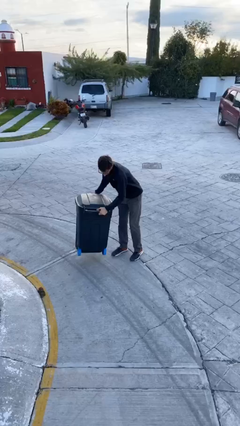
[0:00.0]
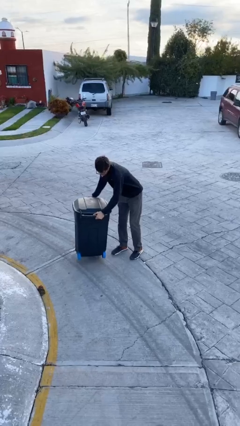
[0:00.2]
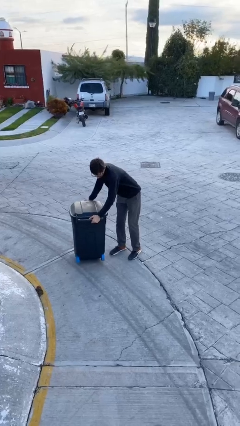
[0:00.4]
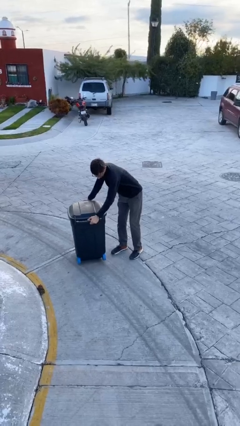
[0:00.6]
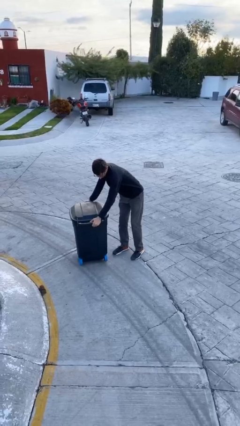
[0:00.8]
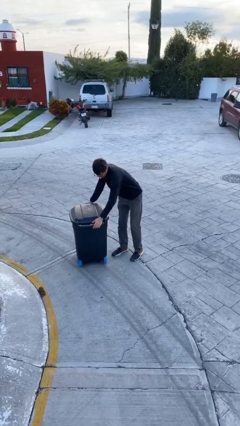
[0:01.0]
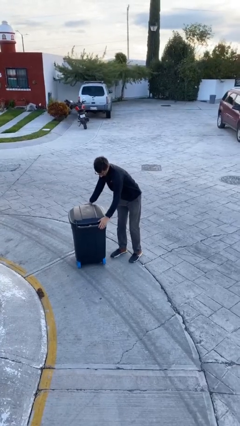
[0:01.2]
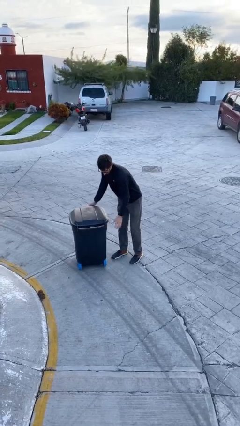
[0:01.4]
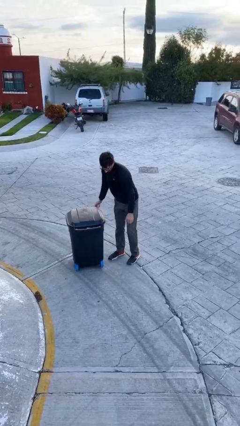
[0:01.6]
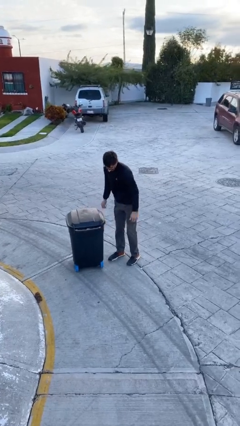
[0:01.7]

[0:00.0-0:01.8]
person puts down object on floor

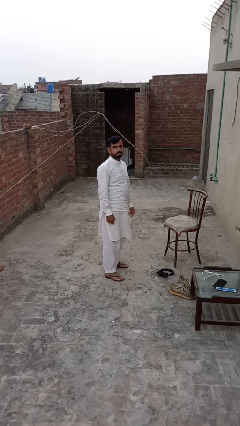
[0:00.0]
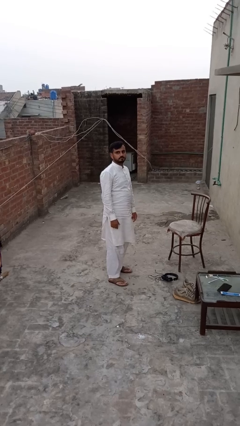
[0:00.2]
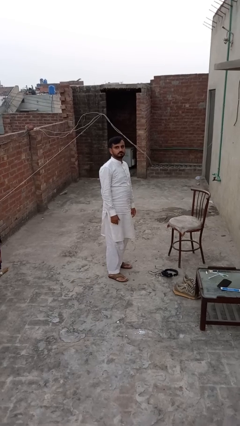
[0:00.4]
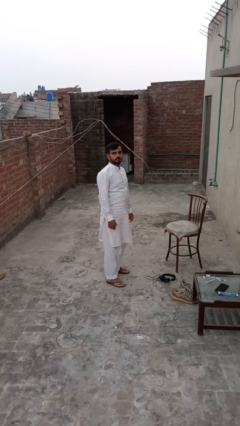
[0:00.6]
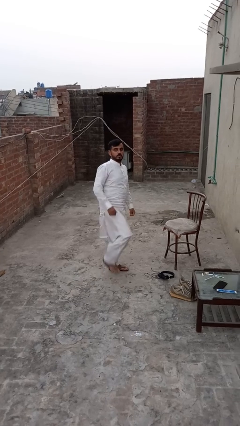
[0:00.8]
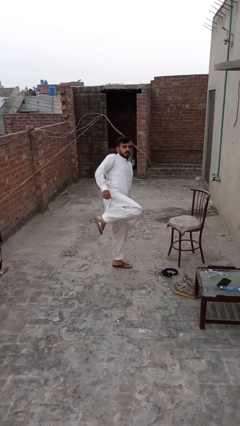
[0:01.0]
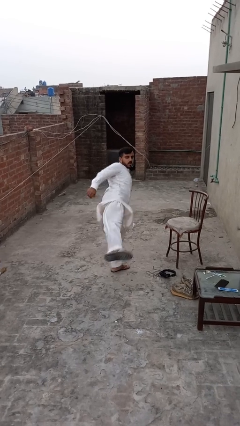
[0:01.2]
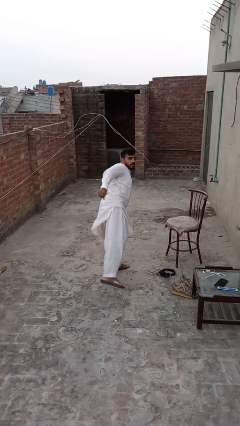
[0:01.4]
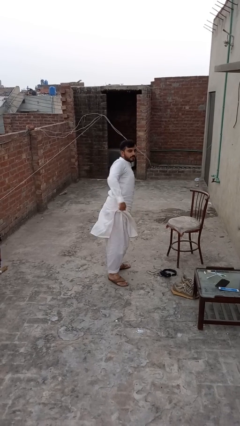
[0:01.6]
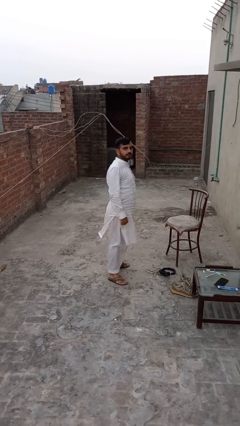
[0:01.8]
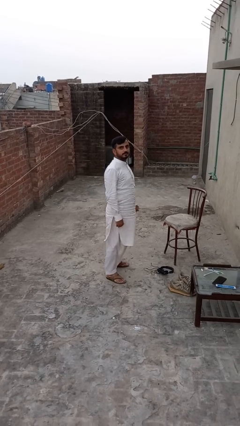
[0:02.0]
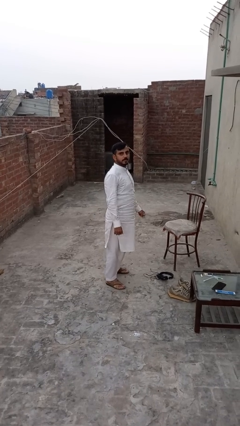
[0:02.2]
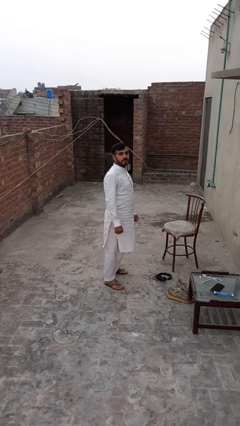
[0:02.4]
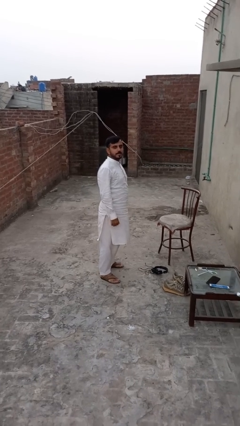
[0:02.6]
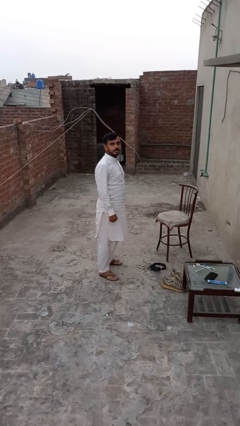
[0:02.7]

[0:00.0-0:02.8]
person karate kicks

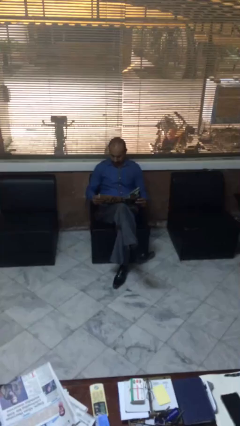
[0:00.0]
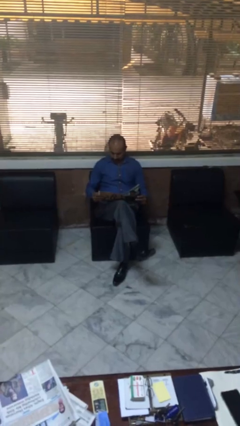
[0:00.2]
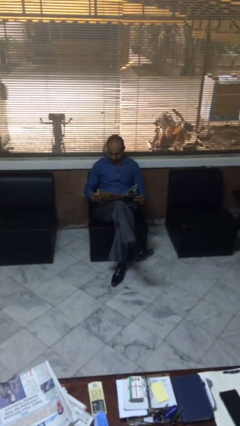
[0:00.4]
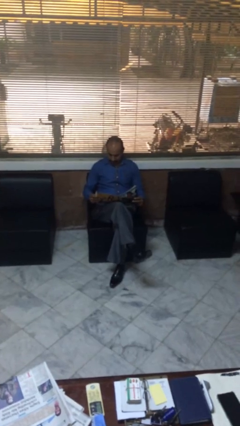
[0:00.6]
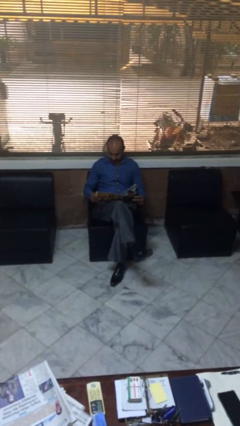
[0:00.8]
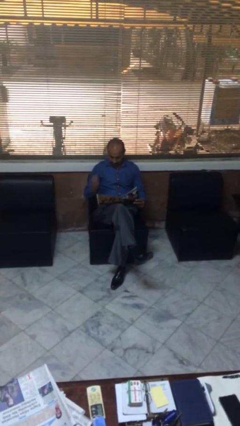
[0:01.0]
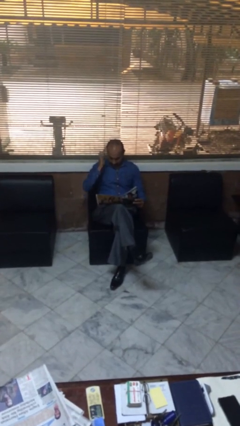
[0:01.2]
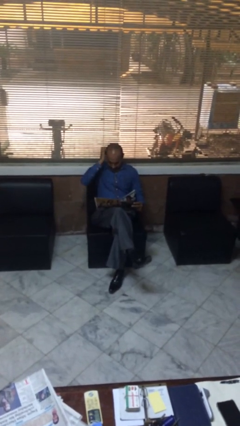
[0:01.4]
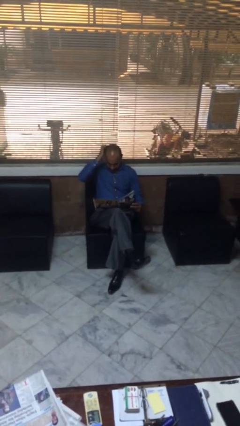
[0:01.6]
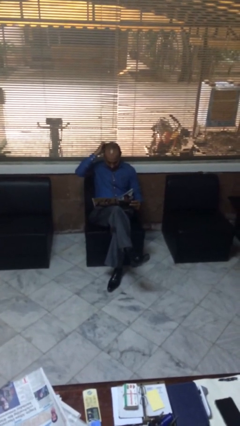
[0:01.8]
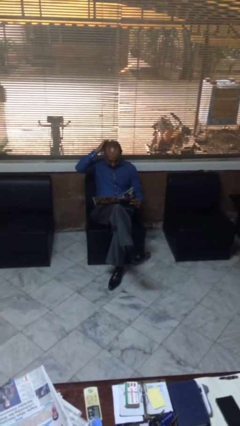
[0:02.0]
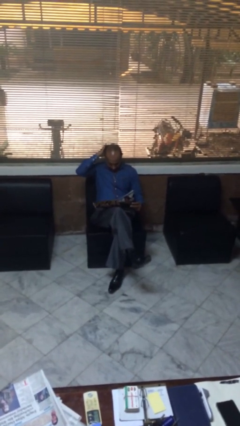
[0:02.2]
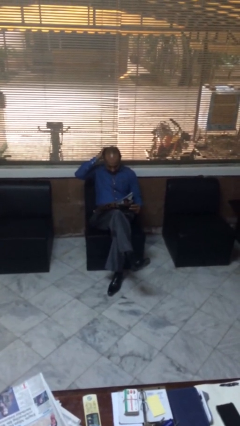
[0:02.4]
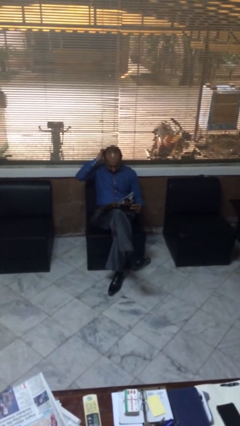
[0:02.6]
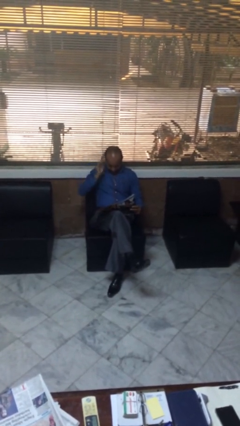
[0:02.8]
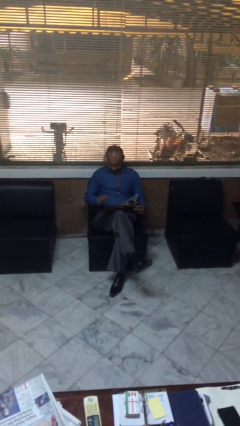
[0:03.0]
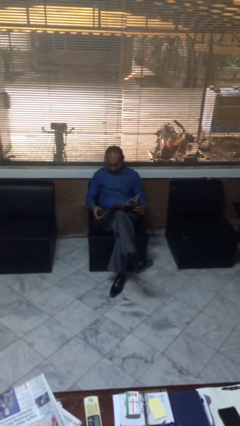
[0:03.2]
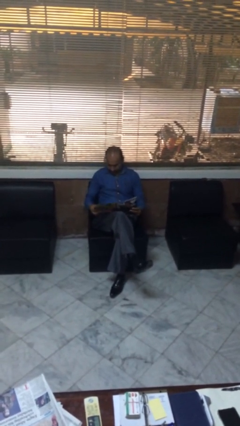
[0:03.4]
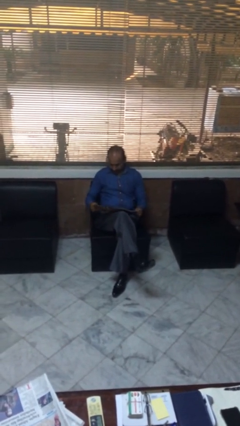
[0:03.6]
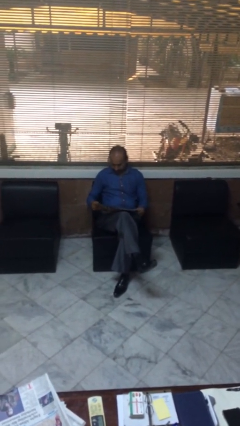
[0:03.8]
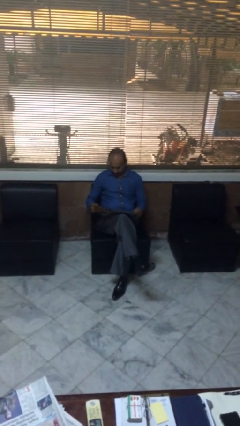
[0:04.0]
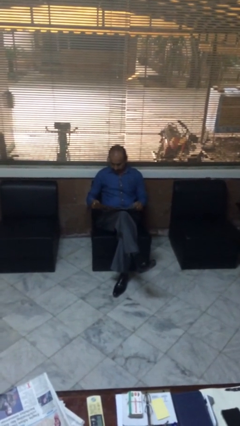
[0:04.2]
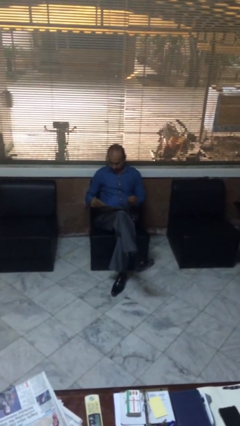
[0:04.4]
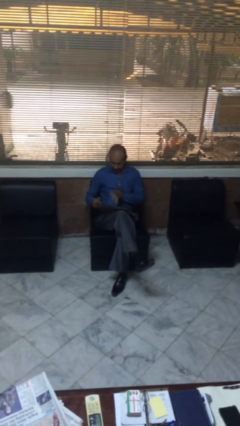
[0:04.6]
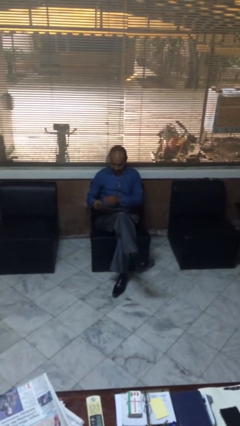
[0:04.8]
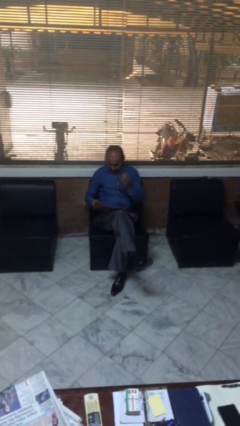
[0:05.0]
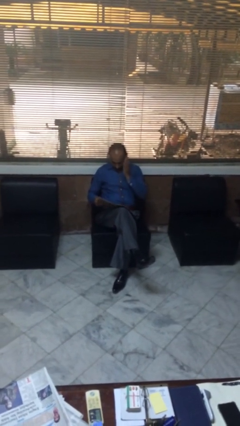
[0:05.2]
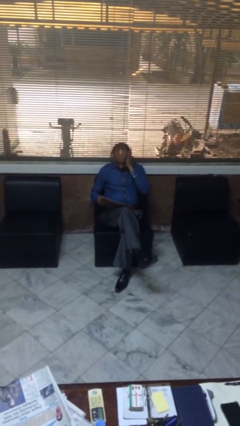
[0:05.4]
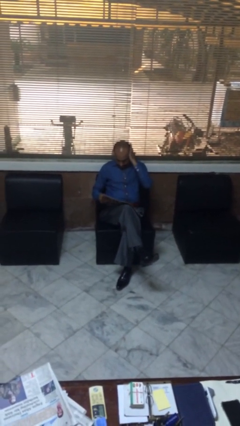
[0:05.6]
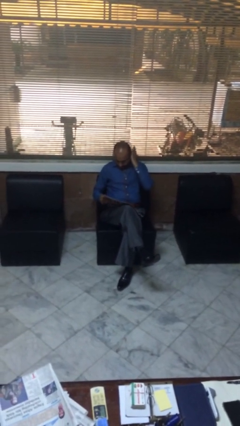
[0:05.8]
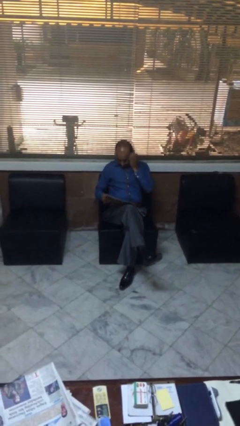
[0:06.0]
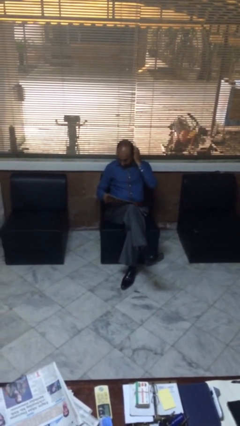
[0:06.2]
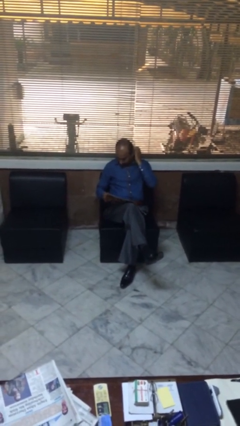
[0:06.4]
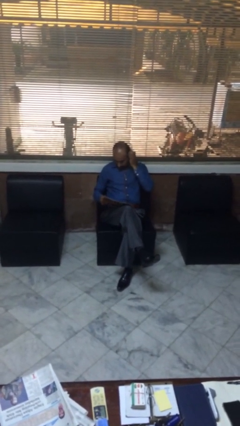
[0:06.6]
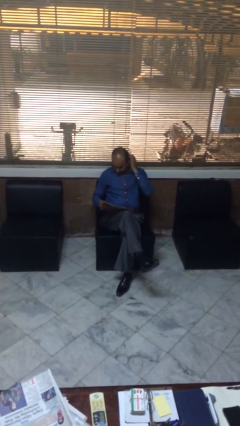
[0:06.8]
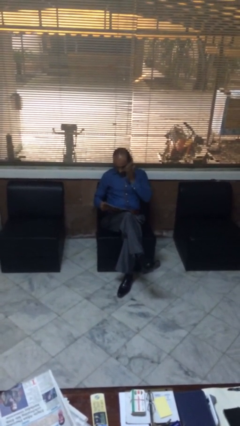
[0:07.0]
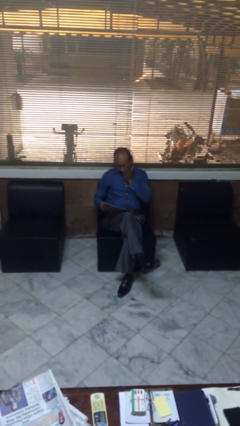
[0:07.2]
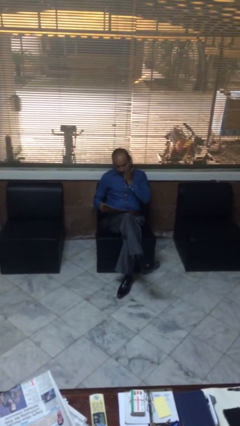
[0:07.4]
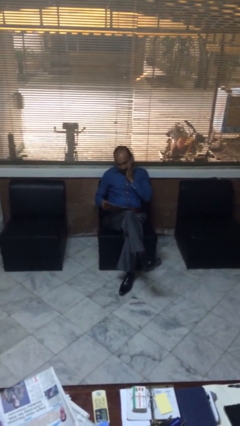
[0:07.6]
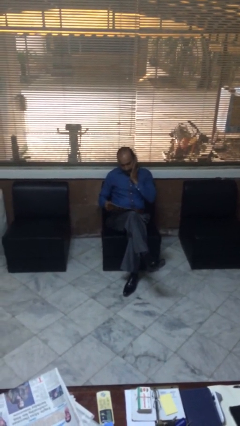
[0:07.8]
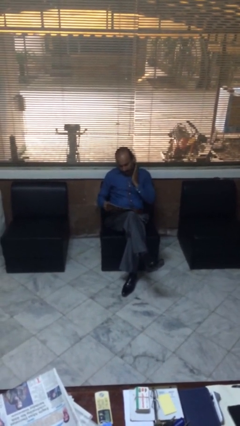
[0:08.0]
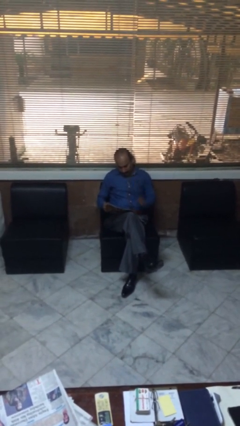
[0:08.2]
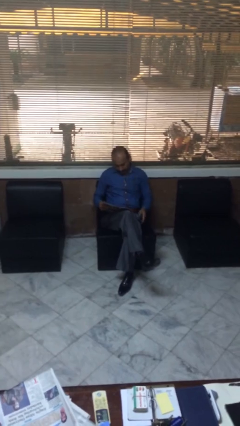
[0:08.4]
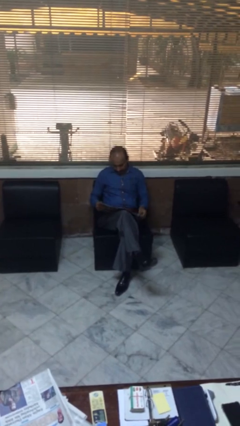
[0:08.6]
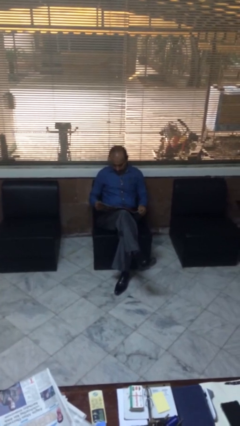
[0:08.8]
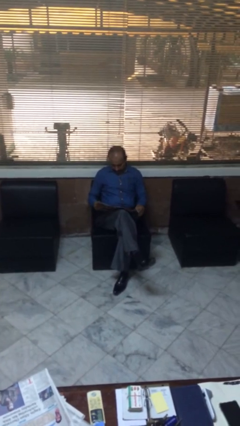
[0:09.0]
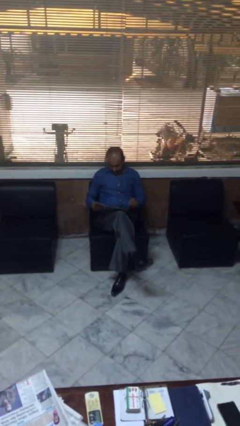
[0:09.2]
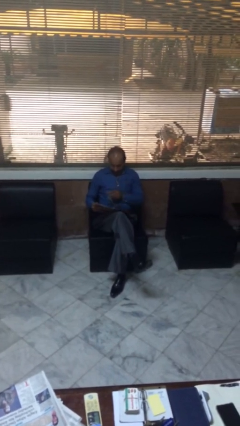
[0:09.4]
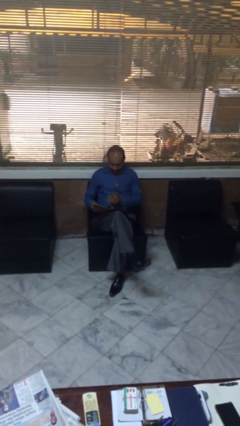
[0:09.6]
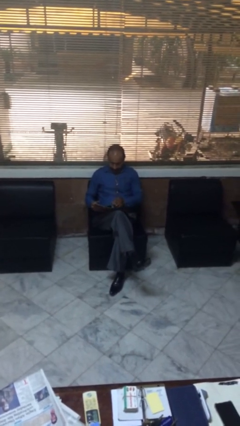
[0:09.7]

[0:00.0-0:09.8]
person reads document

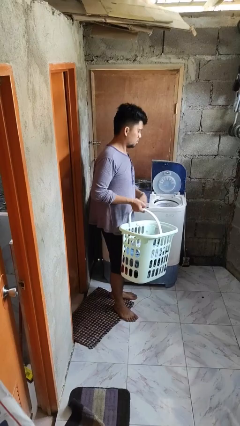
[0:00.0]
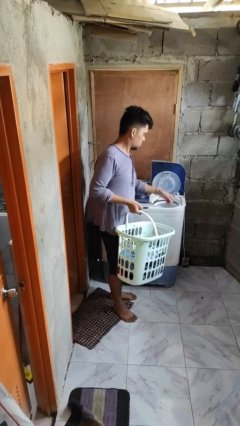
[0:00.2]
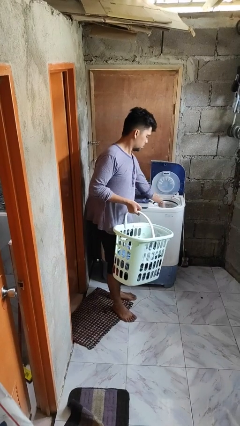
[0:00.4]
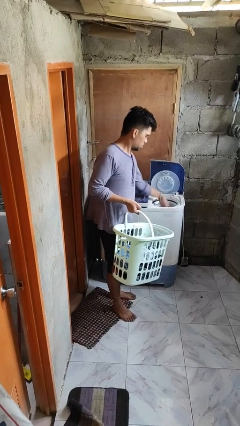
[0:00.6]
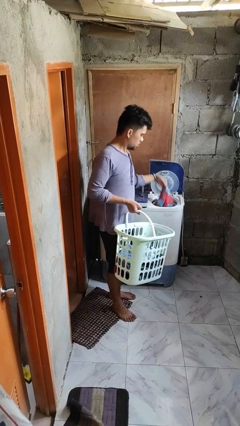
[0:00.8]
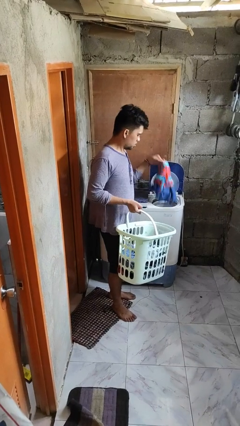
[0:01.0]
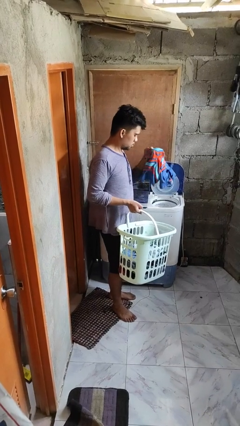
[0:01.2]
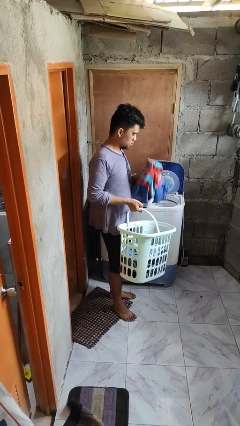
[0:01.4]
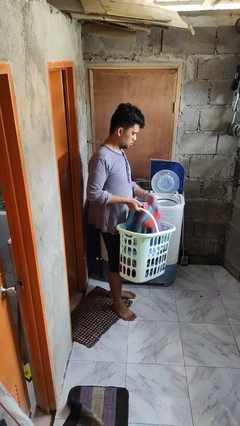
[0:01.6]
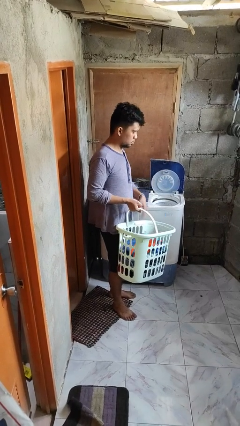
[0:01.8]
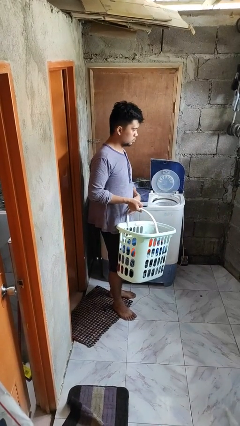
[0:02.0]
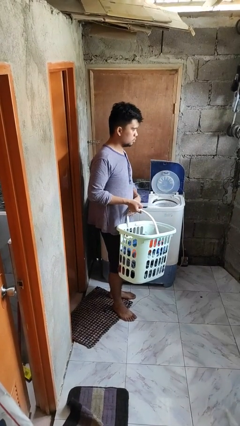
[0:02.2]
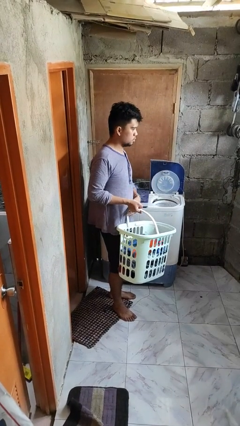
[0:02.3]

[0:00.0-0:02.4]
person unloads dryer

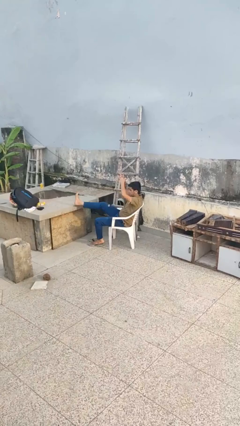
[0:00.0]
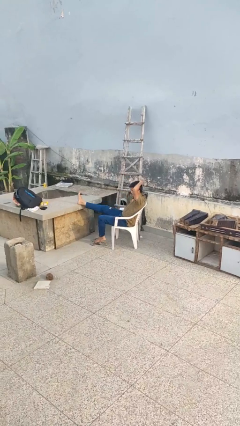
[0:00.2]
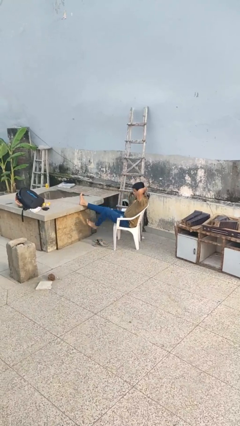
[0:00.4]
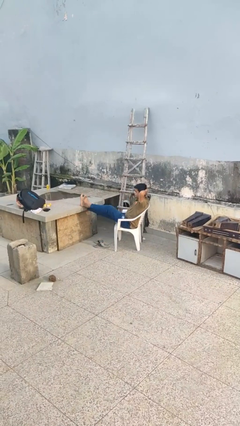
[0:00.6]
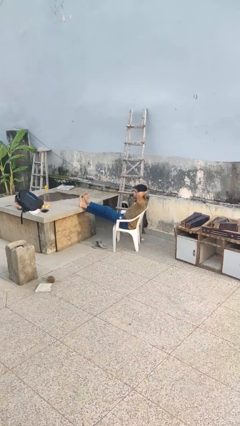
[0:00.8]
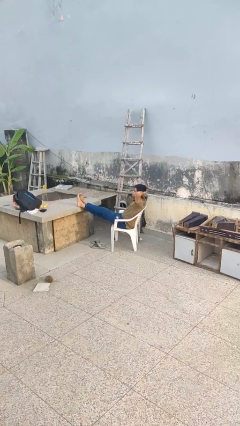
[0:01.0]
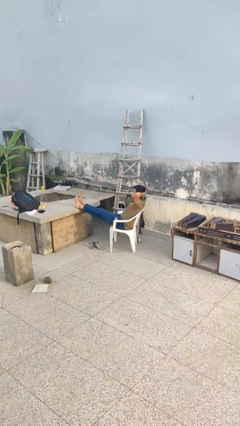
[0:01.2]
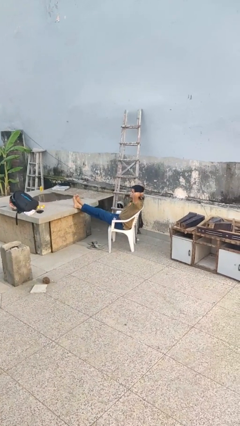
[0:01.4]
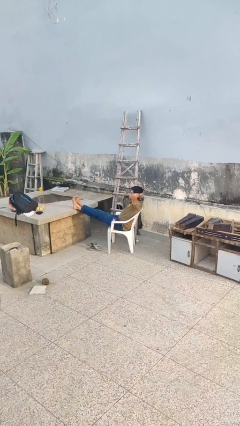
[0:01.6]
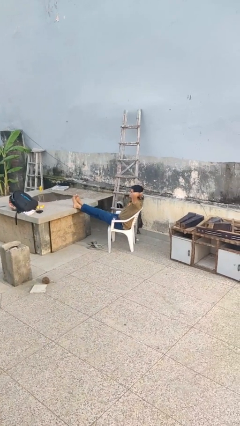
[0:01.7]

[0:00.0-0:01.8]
person puts feet up
